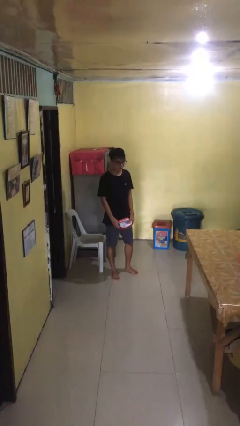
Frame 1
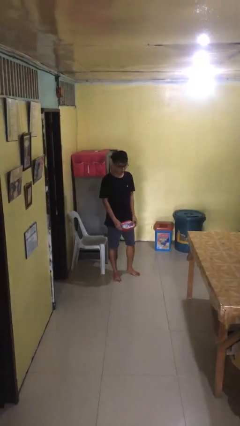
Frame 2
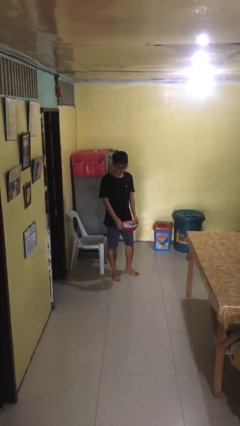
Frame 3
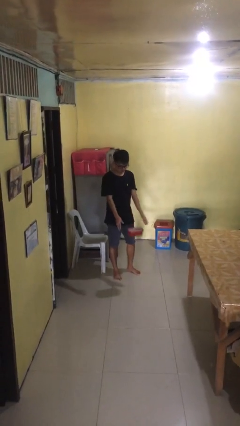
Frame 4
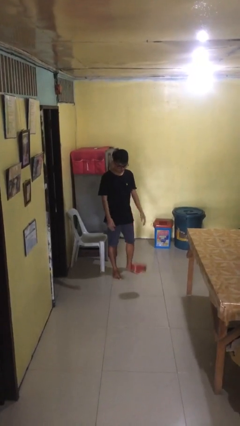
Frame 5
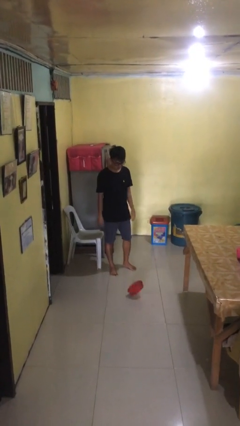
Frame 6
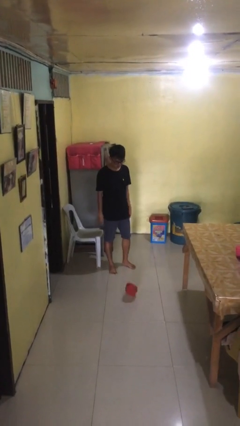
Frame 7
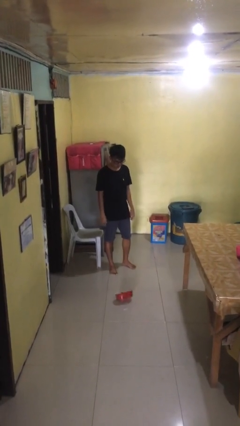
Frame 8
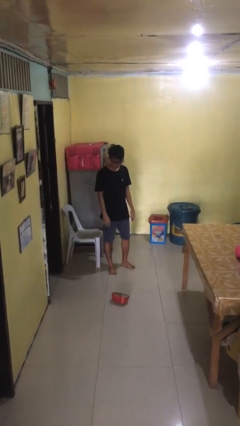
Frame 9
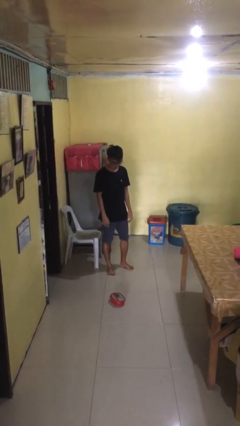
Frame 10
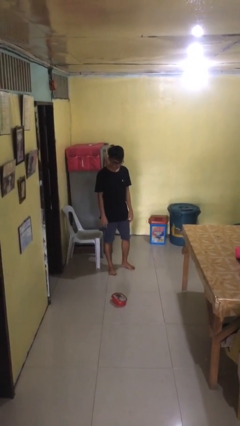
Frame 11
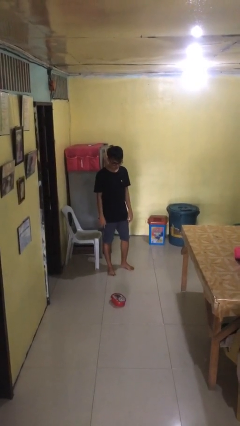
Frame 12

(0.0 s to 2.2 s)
person throws object to ground

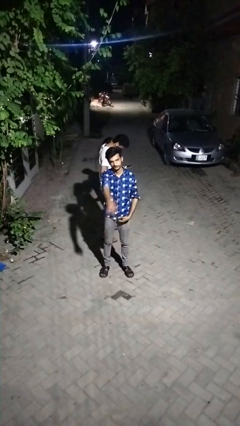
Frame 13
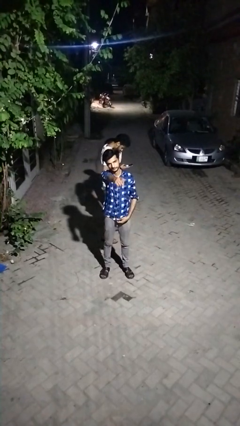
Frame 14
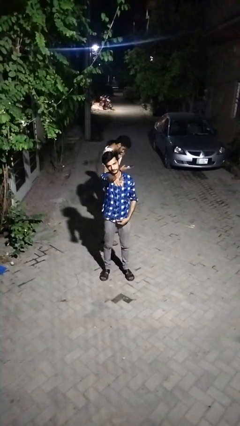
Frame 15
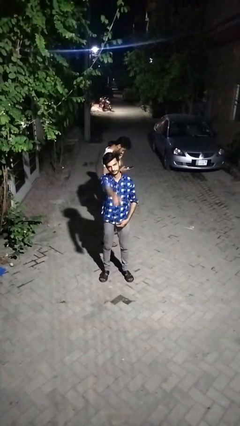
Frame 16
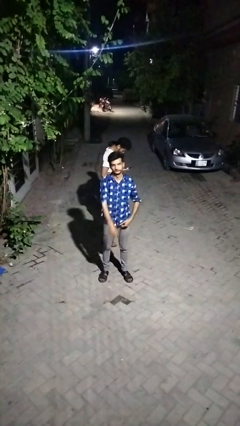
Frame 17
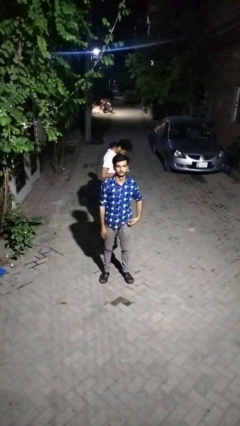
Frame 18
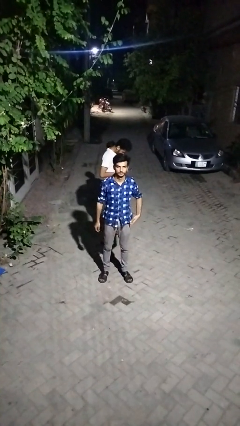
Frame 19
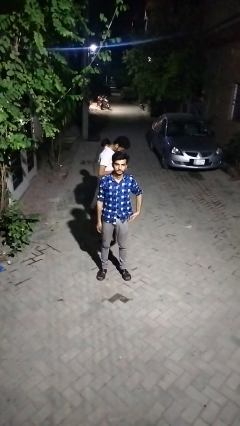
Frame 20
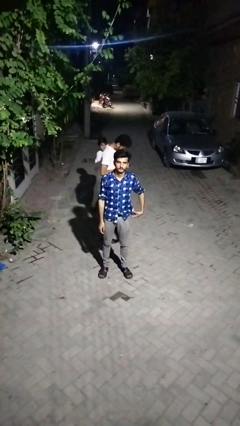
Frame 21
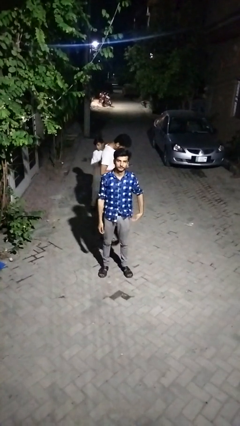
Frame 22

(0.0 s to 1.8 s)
person points at person

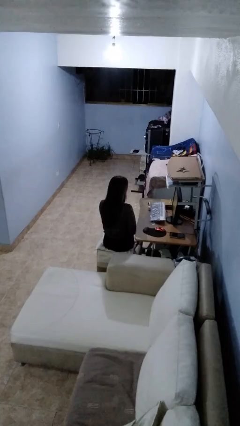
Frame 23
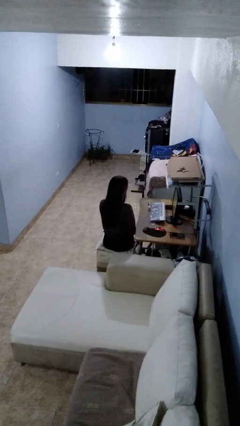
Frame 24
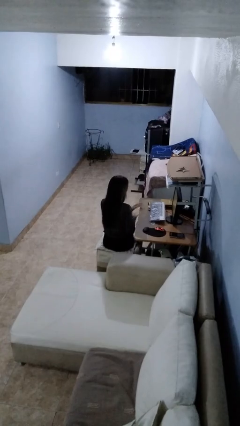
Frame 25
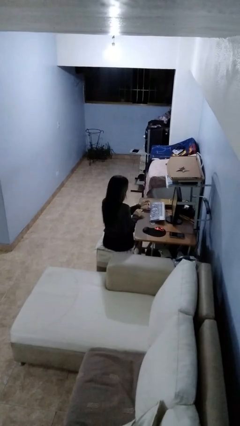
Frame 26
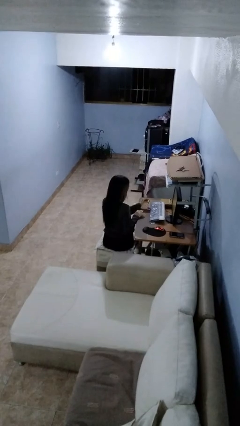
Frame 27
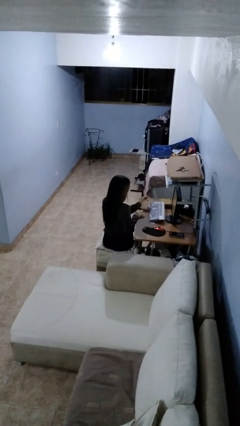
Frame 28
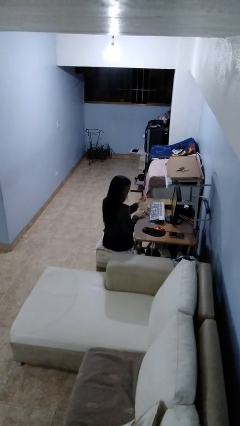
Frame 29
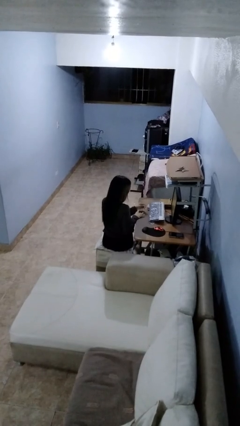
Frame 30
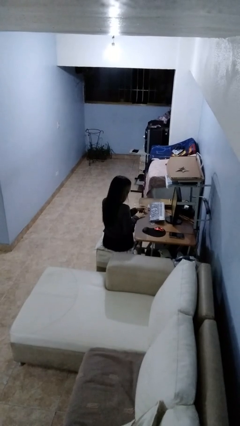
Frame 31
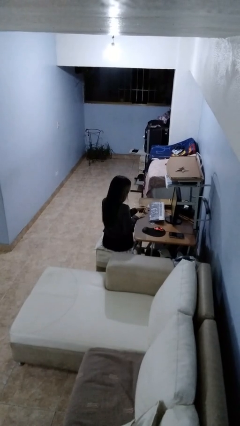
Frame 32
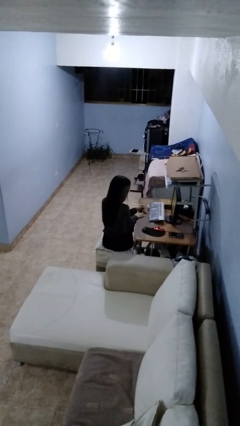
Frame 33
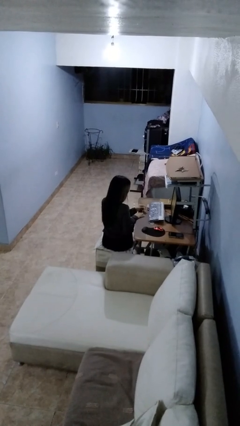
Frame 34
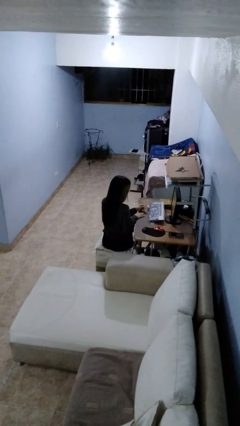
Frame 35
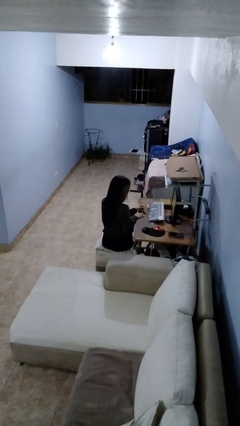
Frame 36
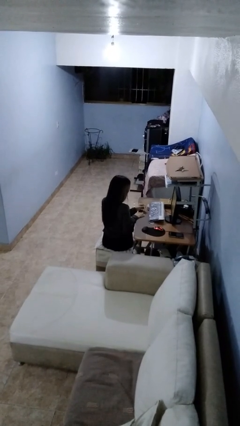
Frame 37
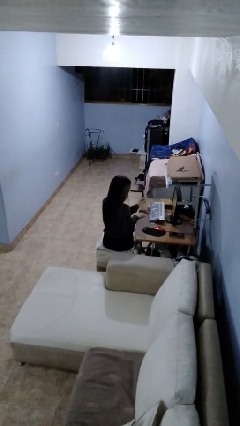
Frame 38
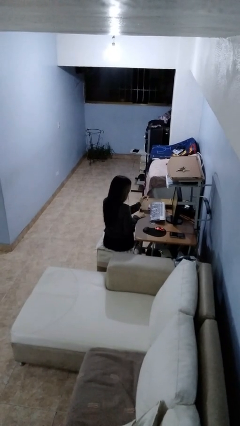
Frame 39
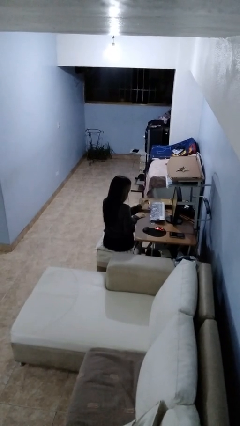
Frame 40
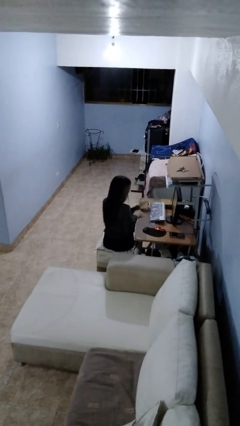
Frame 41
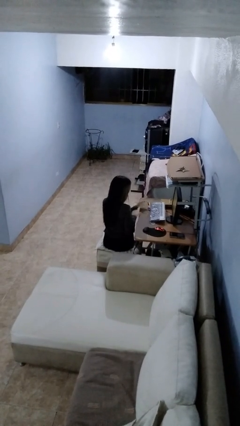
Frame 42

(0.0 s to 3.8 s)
person paints fingernails

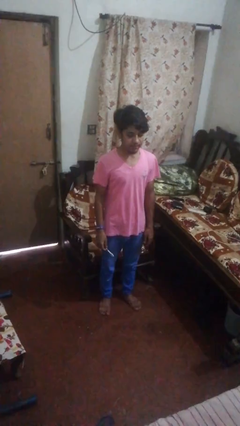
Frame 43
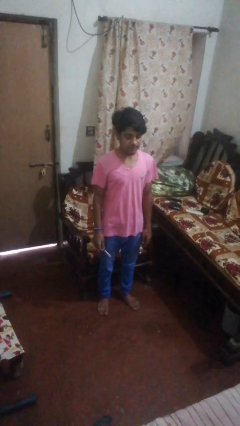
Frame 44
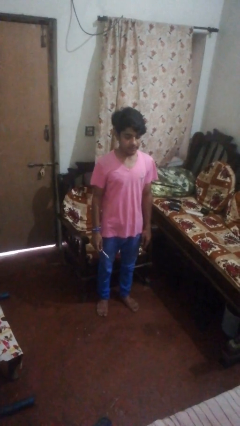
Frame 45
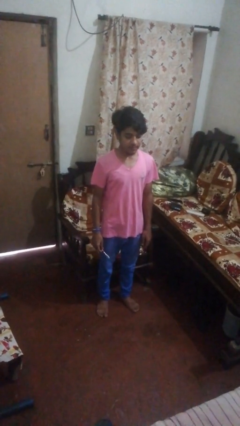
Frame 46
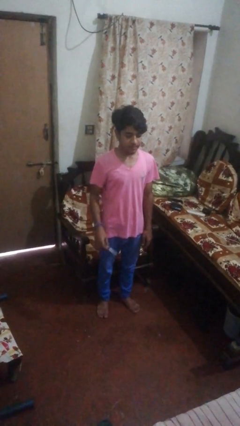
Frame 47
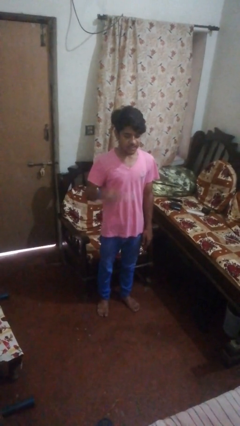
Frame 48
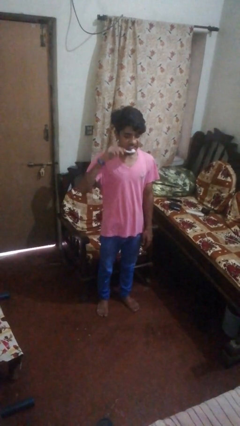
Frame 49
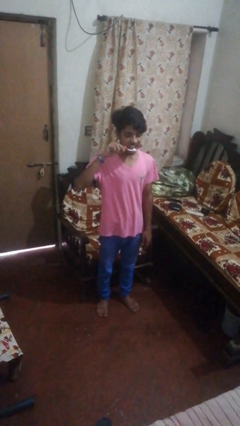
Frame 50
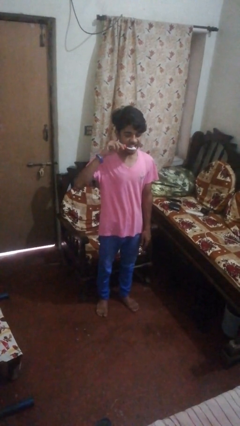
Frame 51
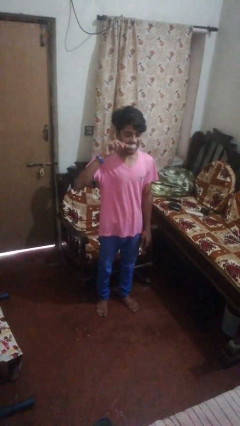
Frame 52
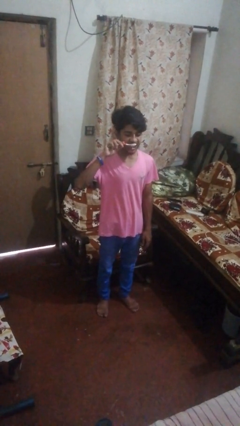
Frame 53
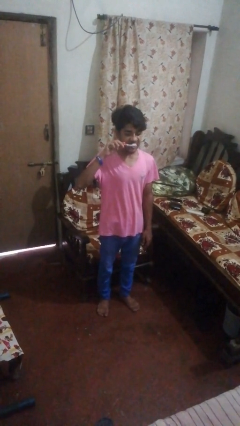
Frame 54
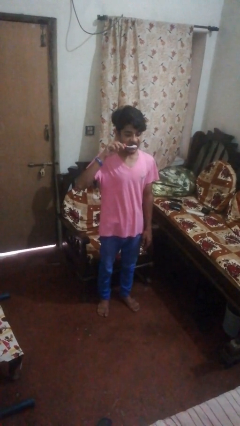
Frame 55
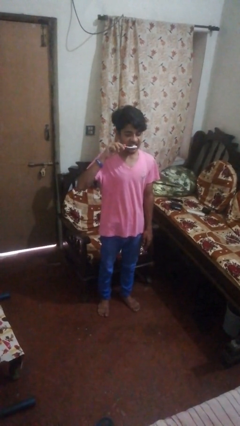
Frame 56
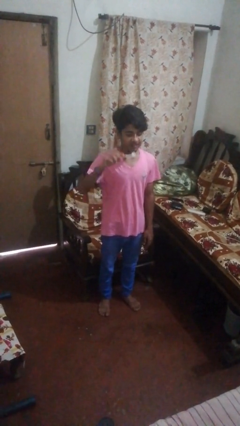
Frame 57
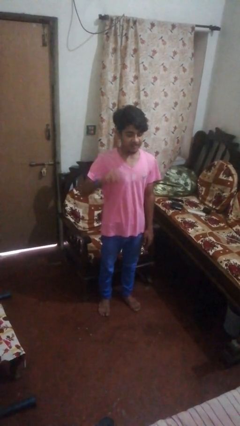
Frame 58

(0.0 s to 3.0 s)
person brushes teeth

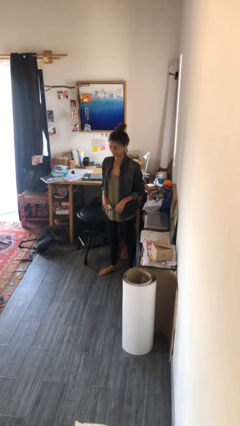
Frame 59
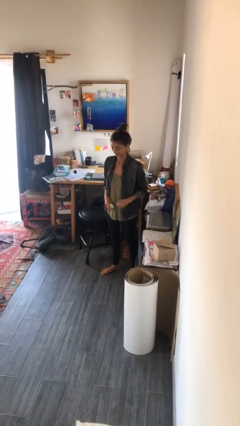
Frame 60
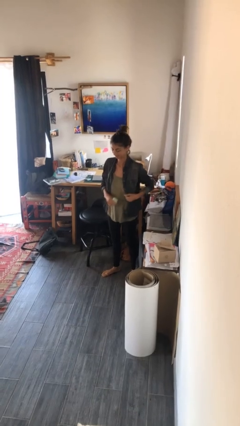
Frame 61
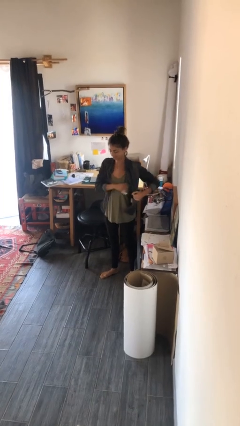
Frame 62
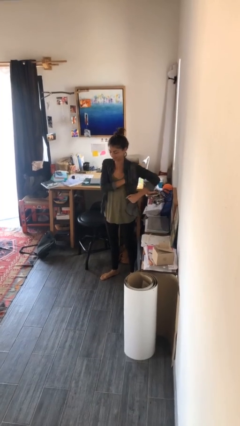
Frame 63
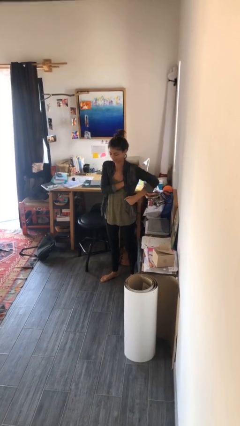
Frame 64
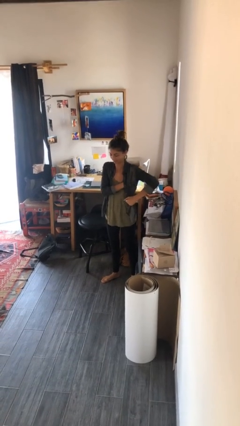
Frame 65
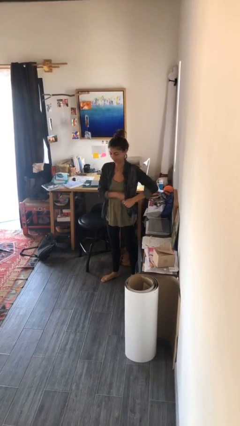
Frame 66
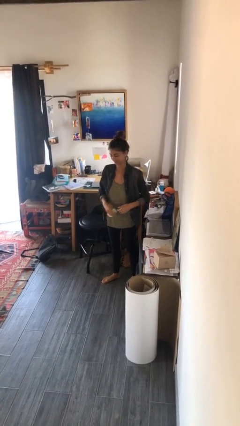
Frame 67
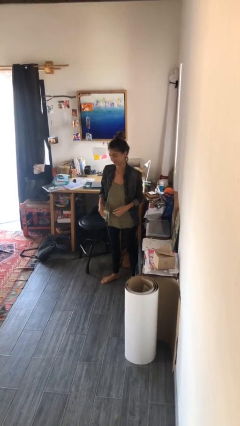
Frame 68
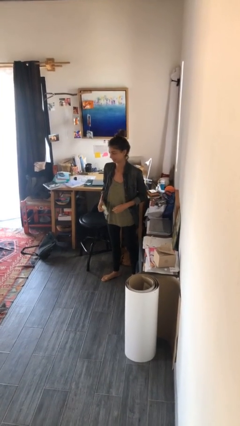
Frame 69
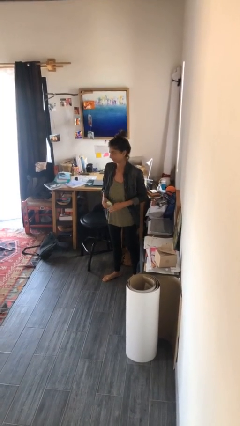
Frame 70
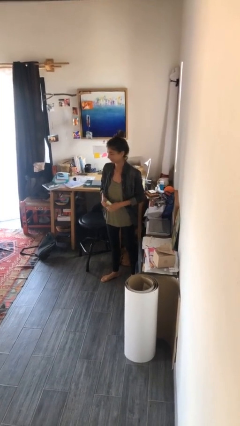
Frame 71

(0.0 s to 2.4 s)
person applies deodorant

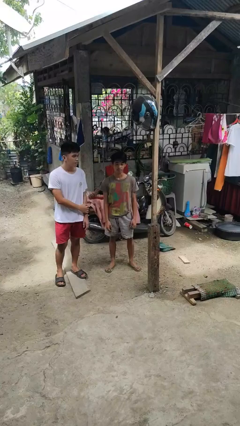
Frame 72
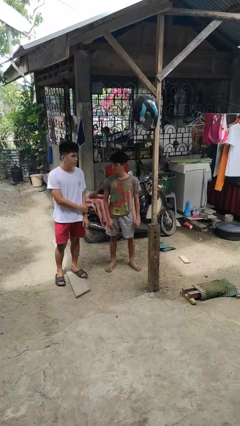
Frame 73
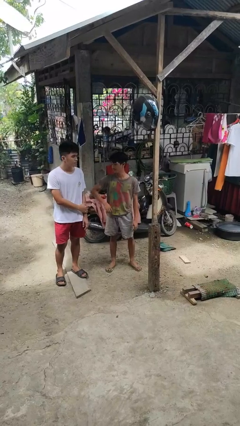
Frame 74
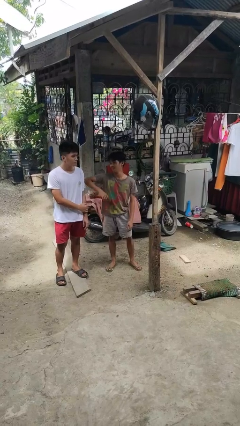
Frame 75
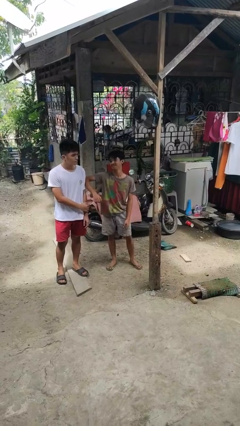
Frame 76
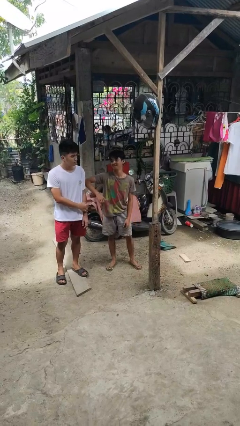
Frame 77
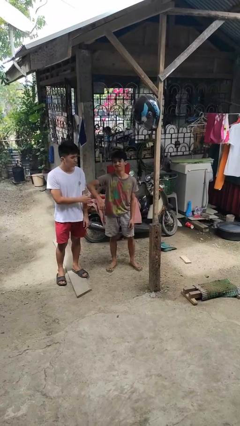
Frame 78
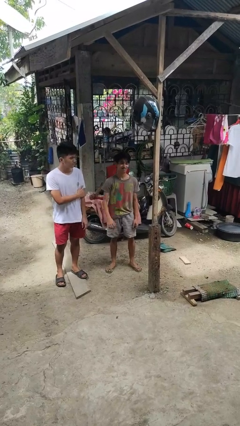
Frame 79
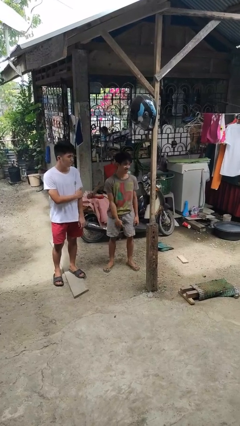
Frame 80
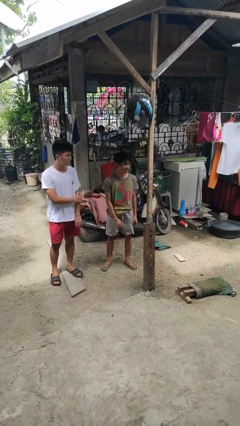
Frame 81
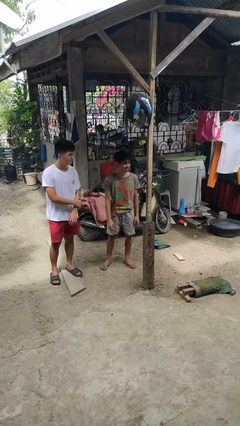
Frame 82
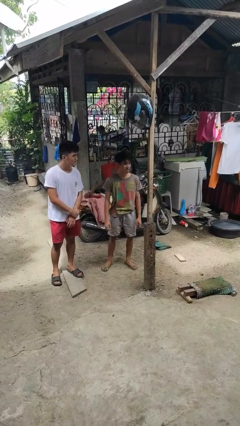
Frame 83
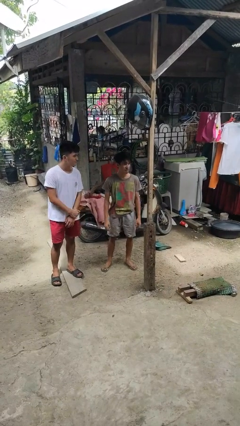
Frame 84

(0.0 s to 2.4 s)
person nudges person with elbow

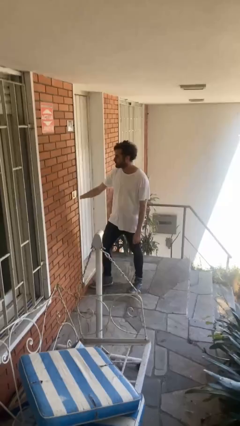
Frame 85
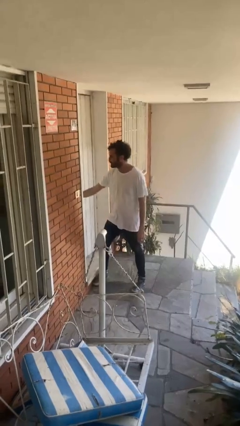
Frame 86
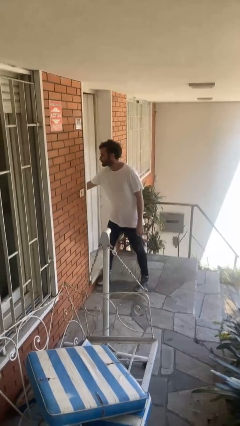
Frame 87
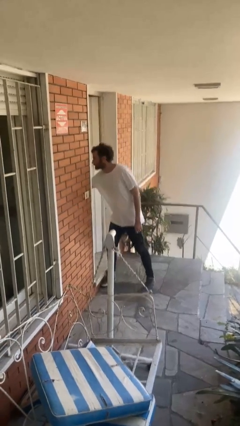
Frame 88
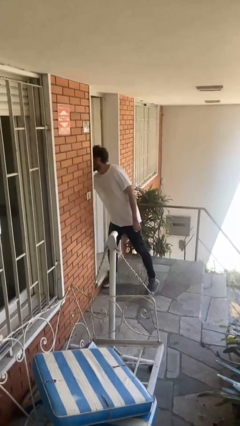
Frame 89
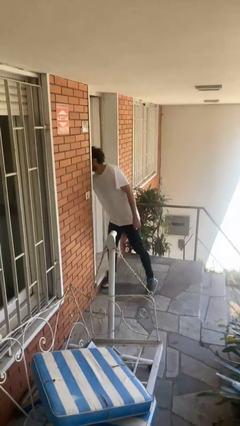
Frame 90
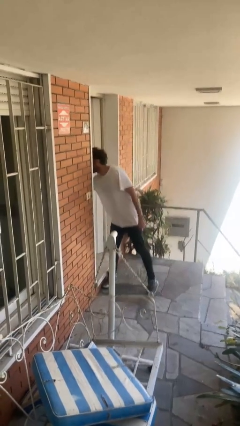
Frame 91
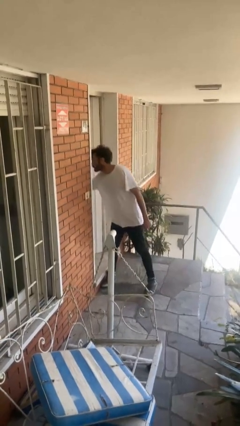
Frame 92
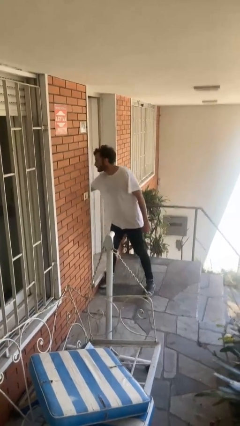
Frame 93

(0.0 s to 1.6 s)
person opens facility door
